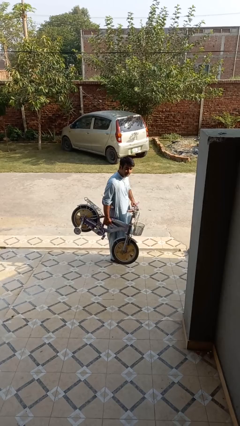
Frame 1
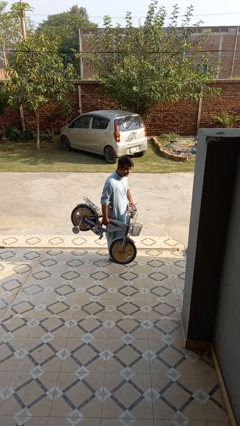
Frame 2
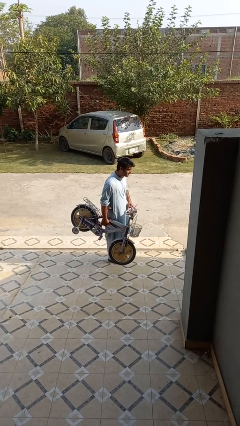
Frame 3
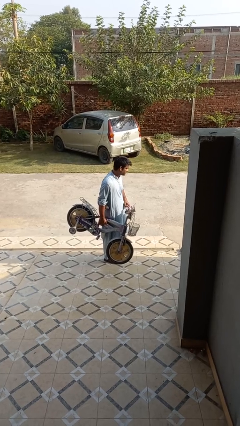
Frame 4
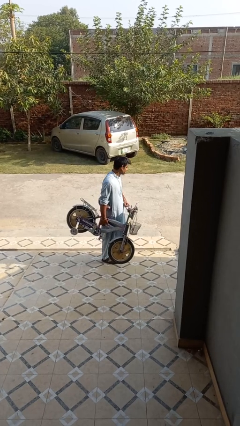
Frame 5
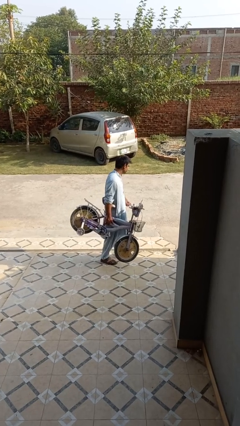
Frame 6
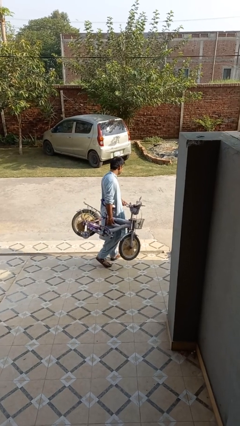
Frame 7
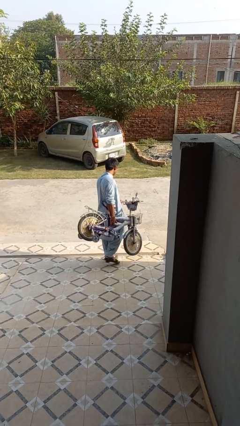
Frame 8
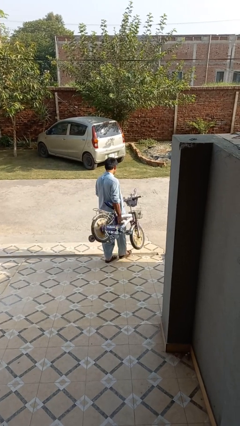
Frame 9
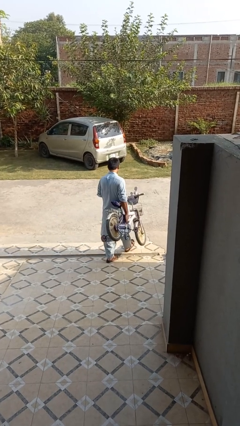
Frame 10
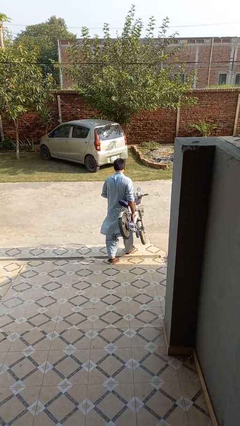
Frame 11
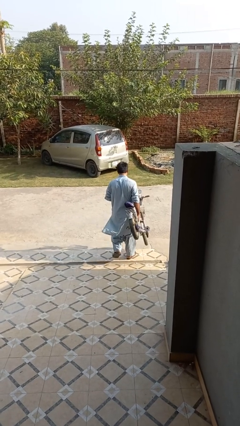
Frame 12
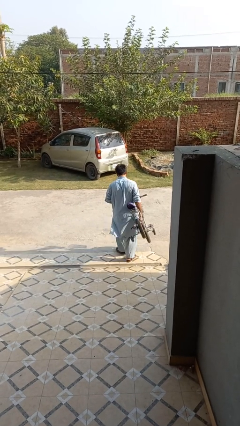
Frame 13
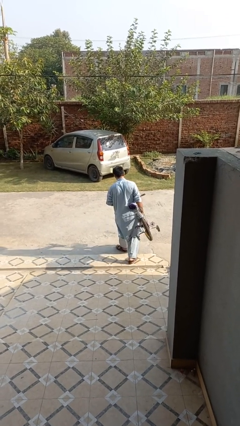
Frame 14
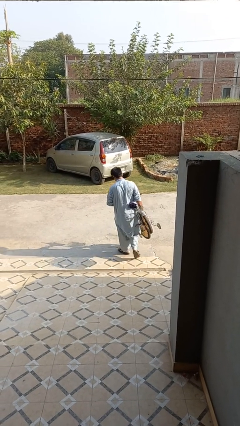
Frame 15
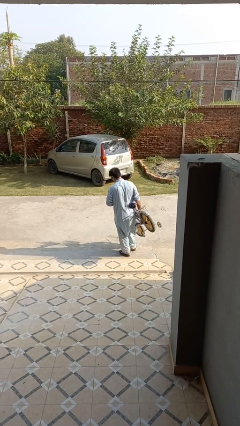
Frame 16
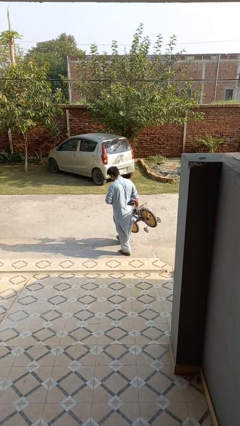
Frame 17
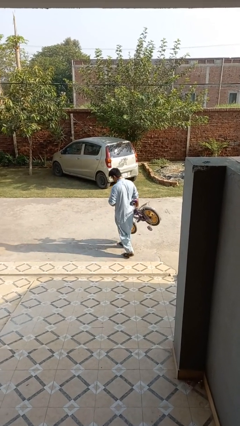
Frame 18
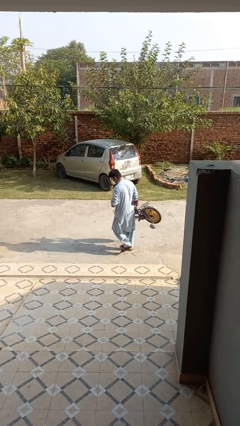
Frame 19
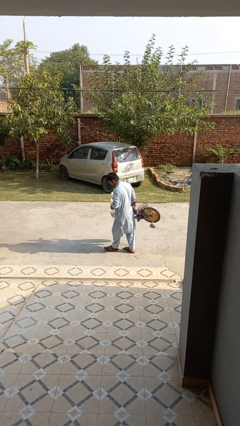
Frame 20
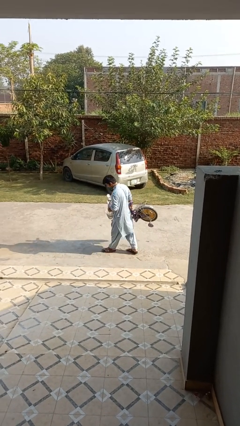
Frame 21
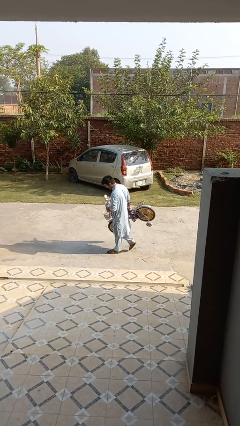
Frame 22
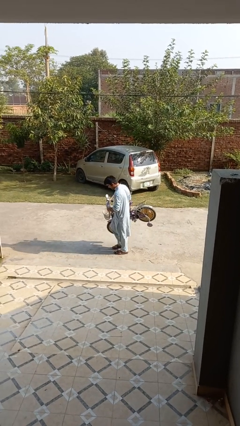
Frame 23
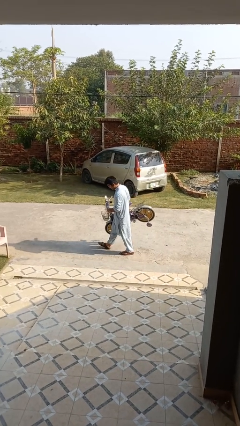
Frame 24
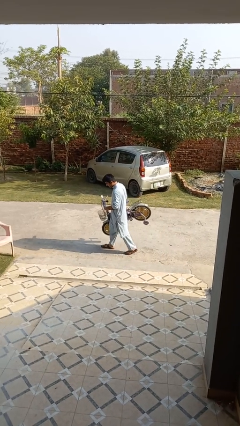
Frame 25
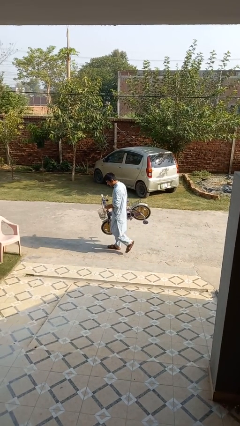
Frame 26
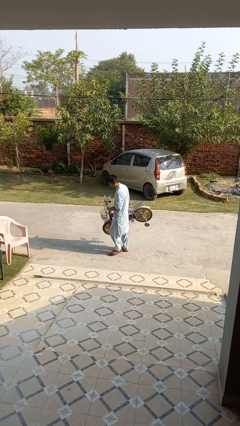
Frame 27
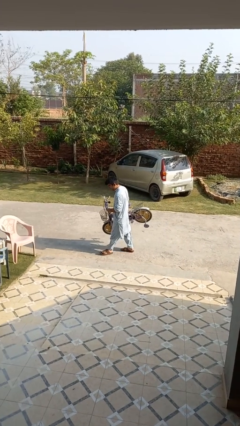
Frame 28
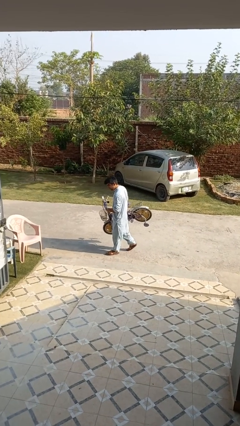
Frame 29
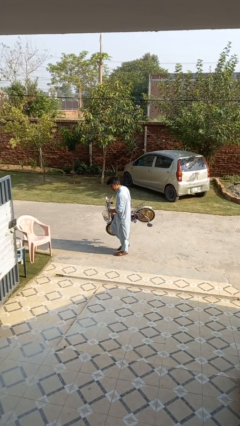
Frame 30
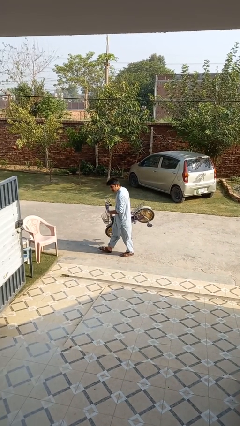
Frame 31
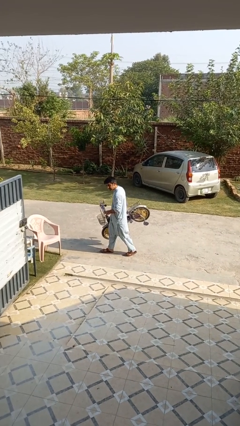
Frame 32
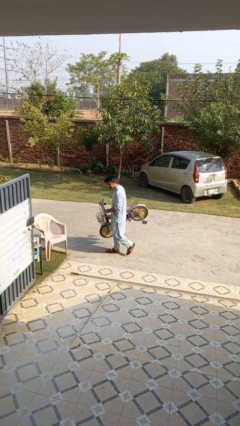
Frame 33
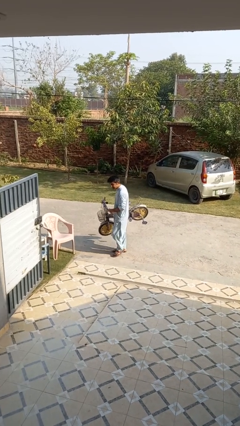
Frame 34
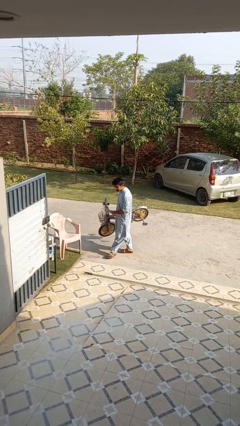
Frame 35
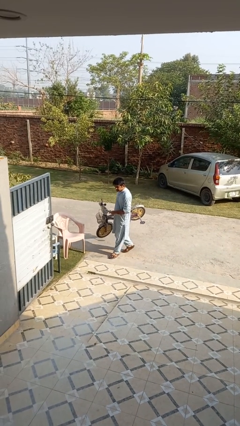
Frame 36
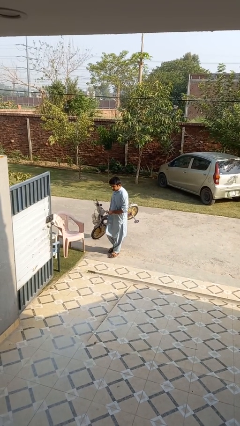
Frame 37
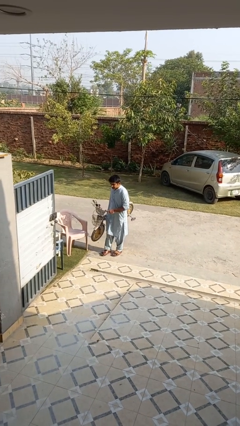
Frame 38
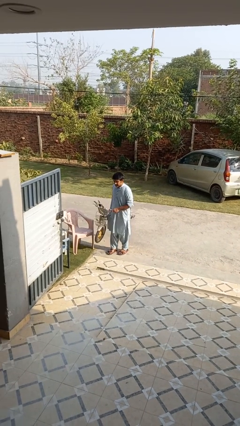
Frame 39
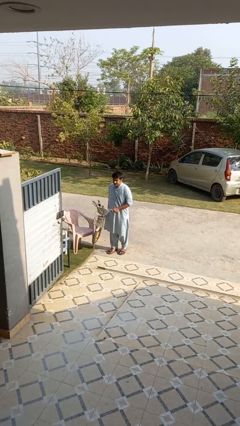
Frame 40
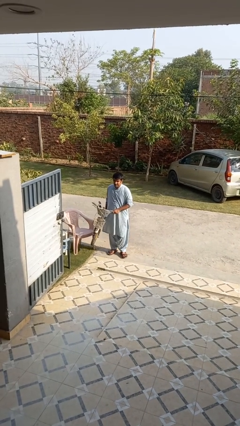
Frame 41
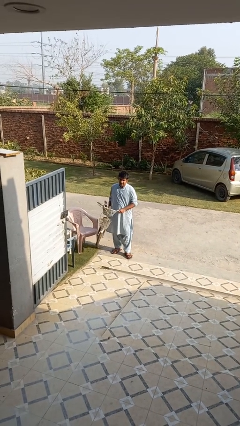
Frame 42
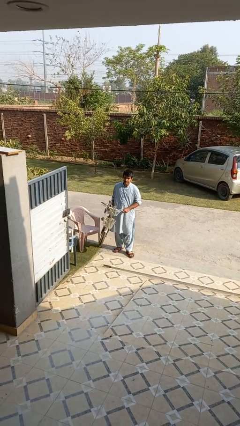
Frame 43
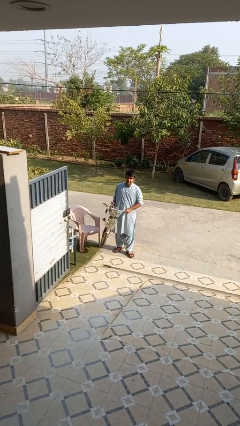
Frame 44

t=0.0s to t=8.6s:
person carries bicycle

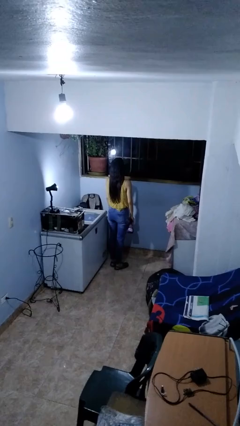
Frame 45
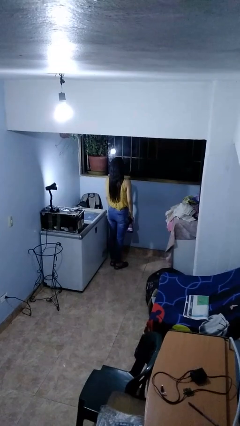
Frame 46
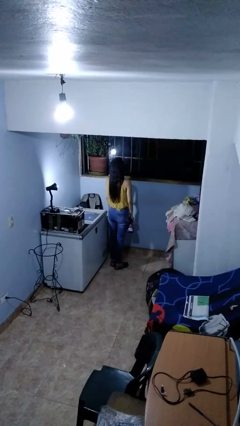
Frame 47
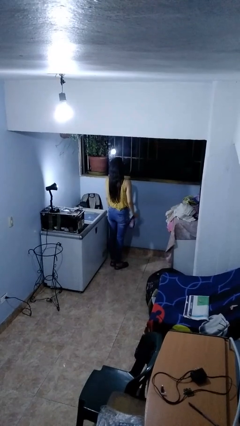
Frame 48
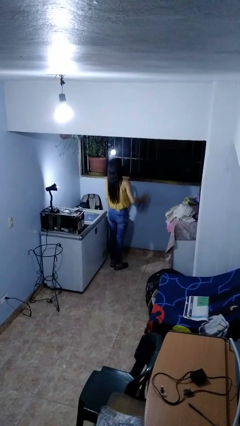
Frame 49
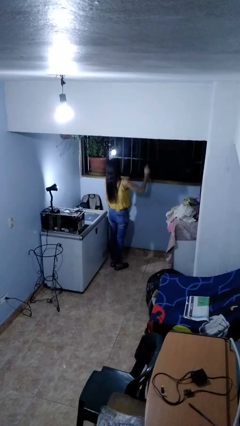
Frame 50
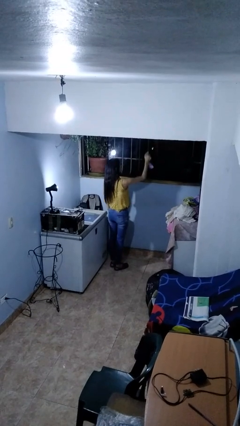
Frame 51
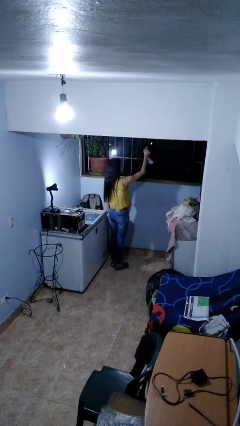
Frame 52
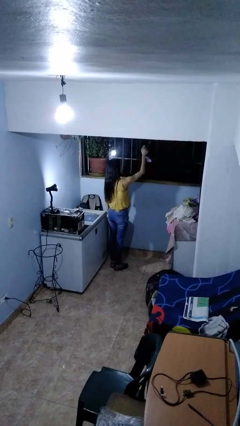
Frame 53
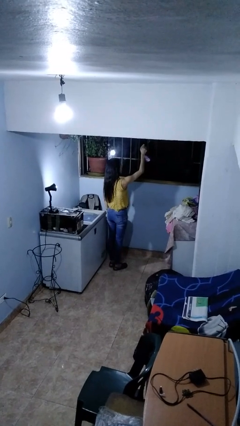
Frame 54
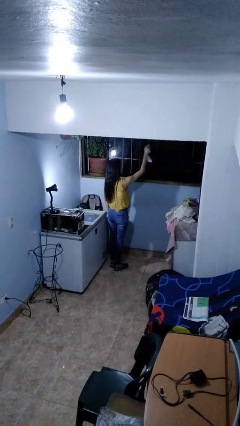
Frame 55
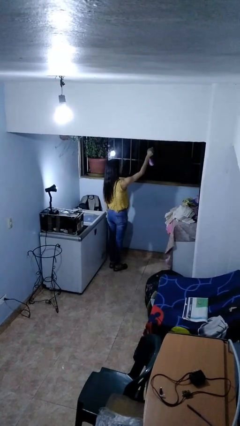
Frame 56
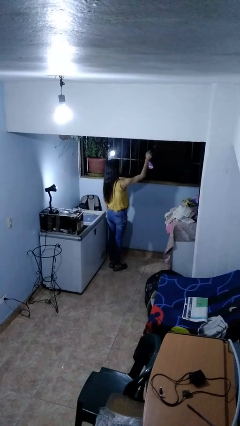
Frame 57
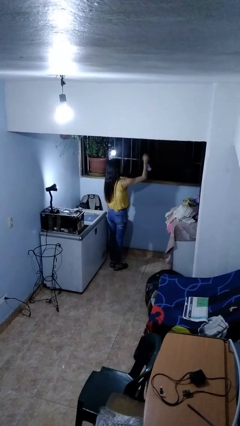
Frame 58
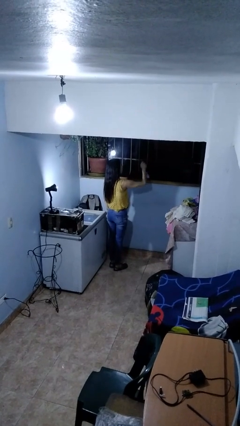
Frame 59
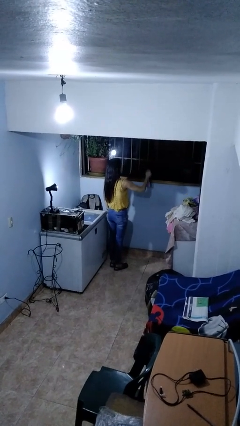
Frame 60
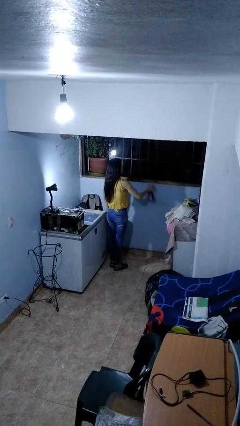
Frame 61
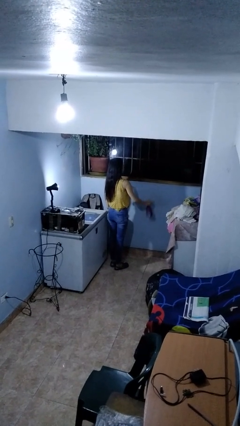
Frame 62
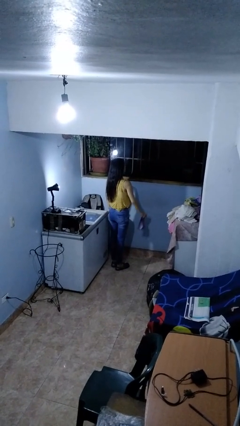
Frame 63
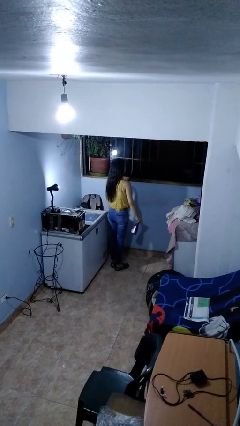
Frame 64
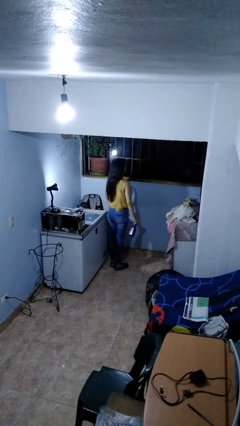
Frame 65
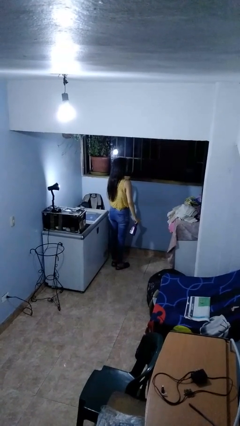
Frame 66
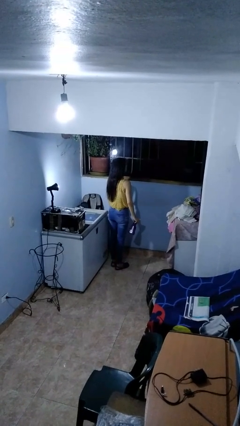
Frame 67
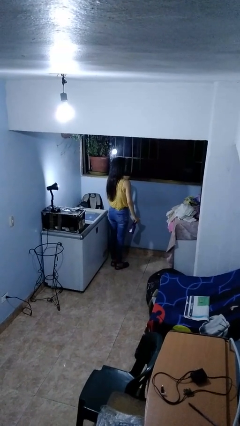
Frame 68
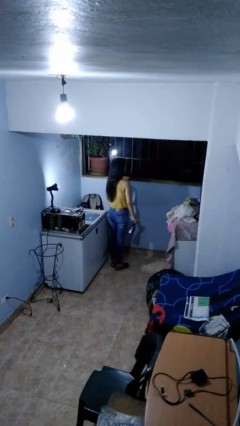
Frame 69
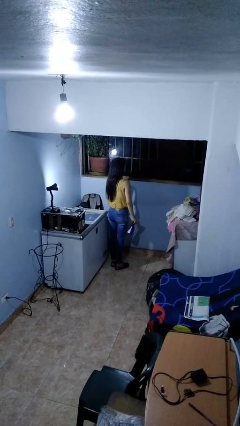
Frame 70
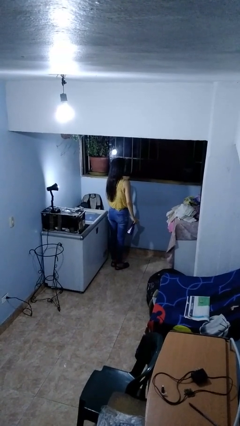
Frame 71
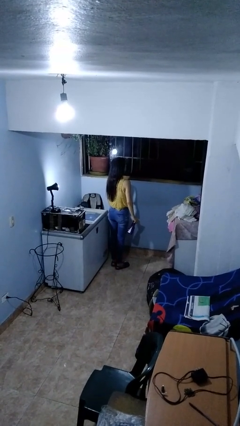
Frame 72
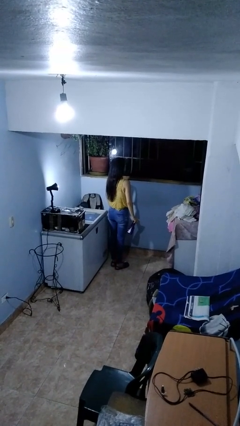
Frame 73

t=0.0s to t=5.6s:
person sprays from bottle

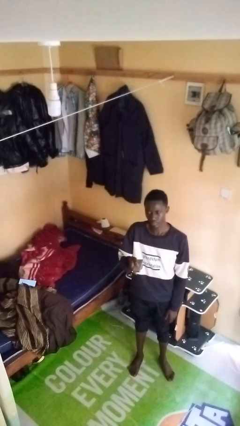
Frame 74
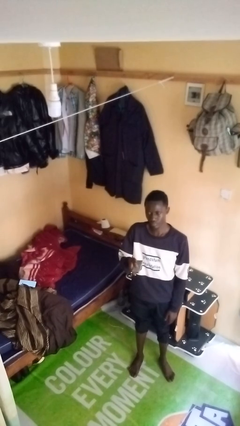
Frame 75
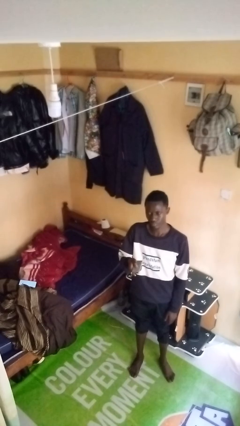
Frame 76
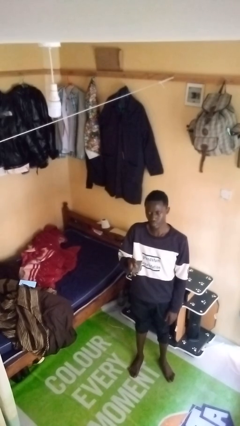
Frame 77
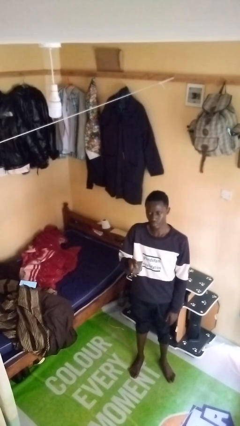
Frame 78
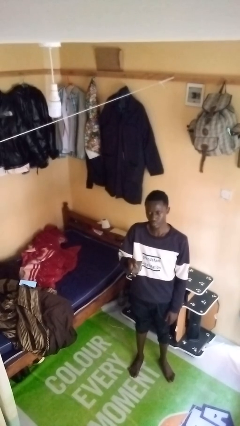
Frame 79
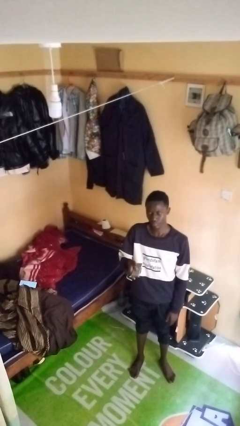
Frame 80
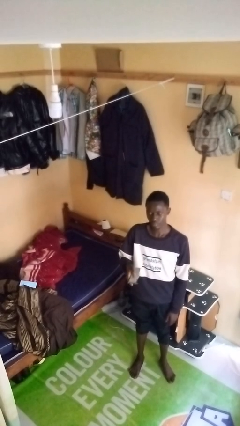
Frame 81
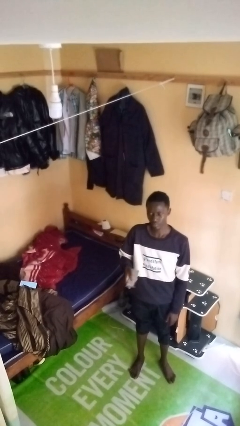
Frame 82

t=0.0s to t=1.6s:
person uses television remote

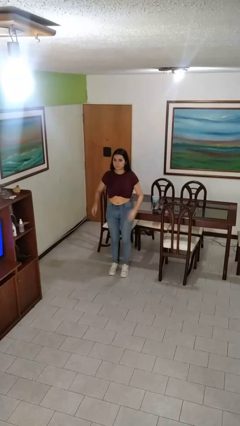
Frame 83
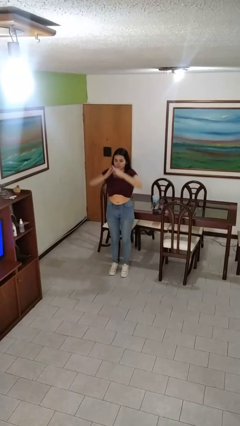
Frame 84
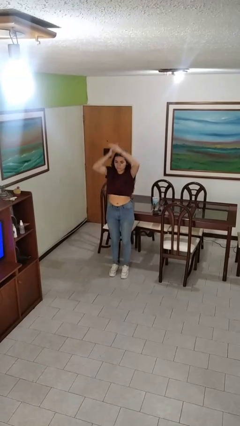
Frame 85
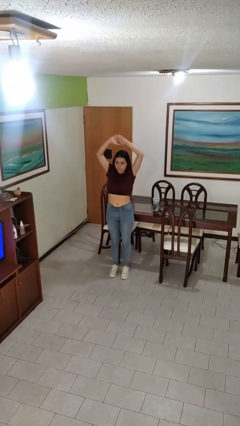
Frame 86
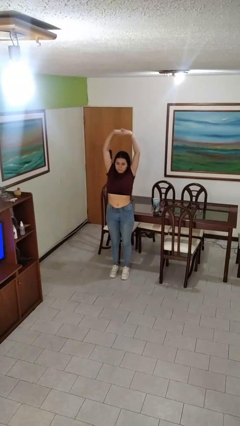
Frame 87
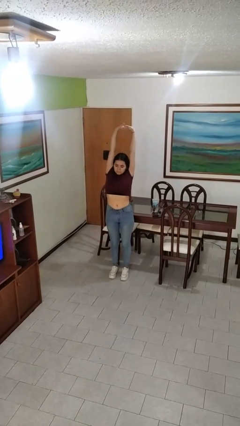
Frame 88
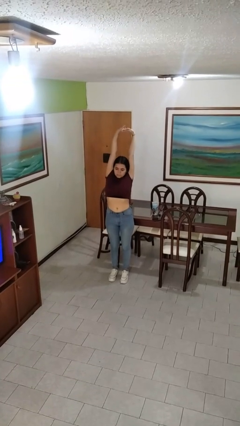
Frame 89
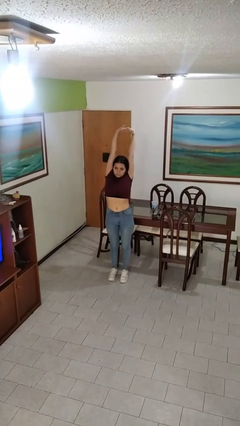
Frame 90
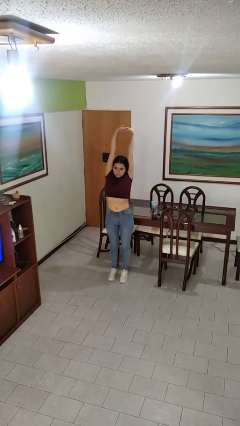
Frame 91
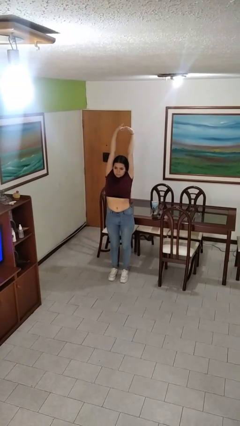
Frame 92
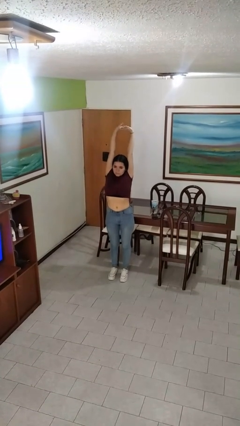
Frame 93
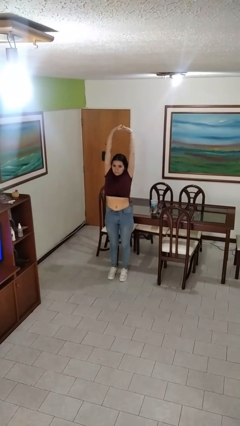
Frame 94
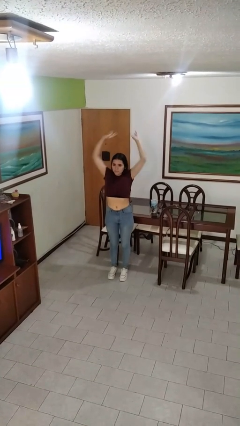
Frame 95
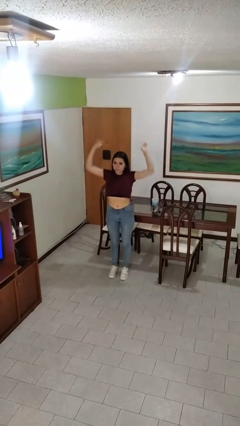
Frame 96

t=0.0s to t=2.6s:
person stretches arms over head
